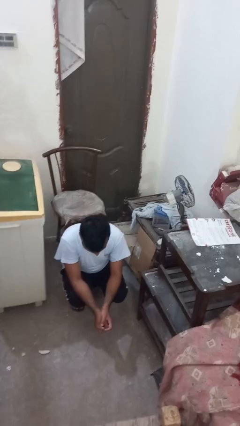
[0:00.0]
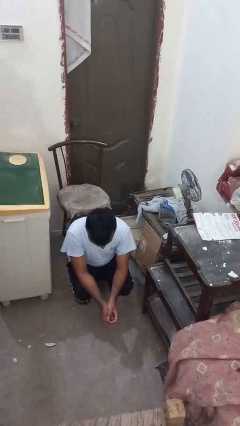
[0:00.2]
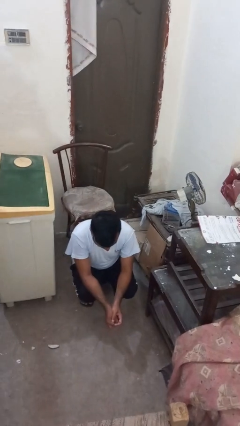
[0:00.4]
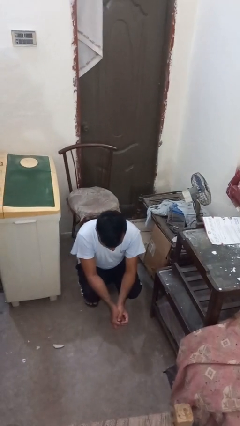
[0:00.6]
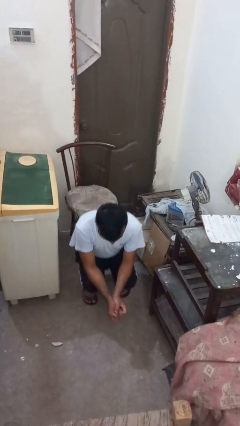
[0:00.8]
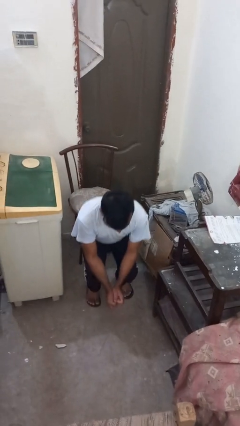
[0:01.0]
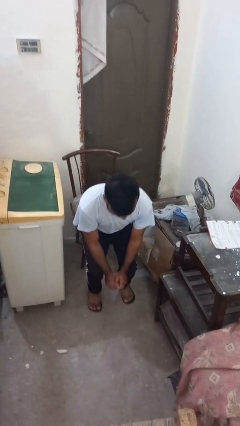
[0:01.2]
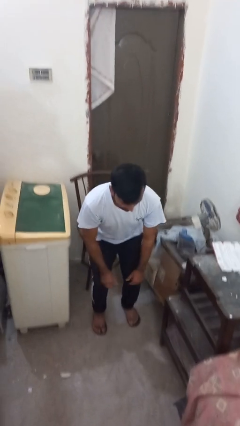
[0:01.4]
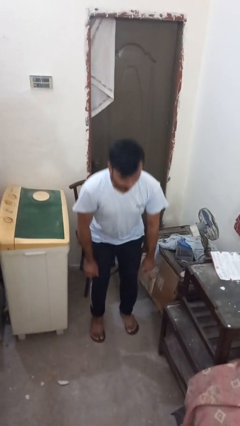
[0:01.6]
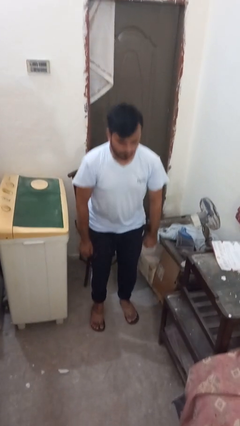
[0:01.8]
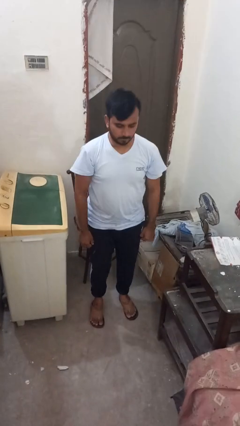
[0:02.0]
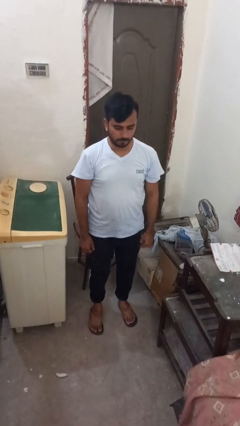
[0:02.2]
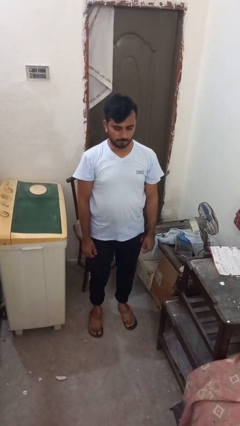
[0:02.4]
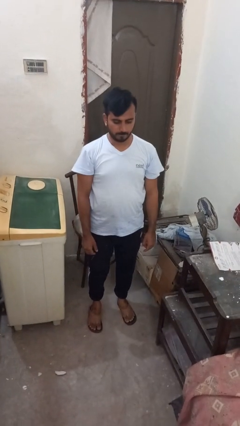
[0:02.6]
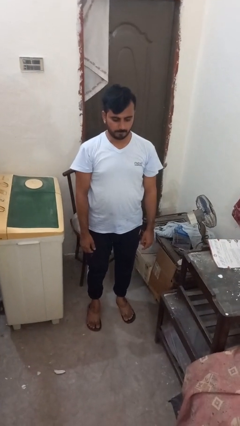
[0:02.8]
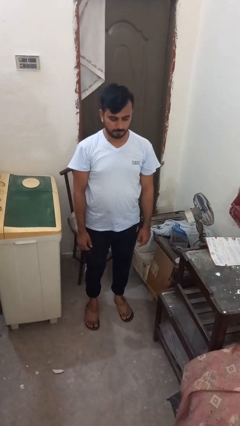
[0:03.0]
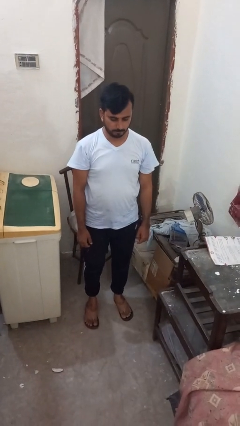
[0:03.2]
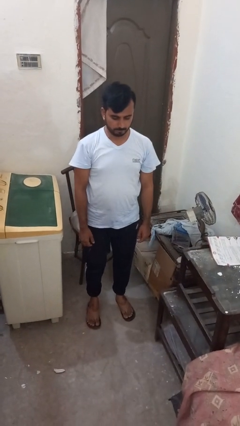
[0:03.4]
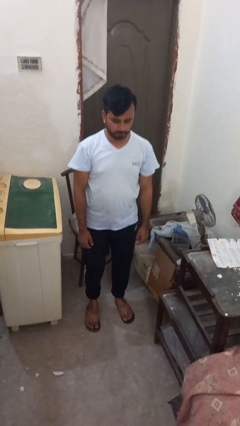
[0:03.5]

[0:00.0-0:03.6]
person stands up from floor

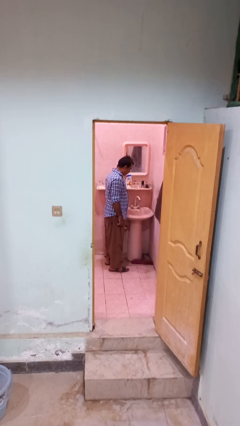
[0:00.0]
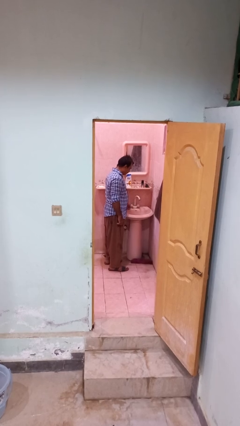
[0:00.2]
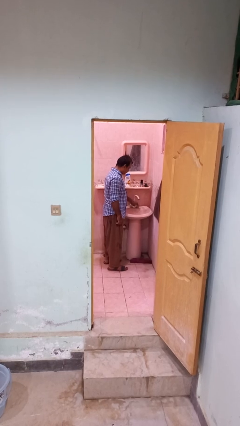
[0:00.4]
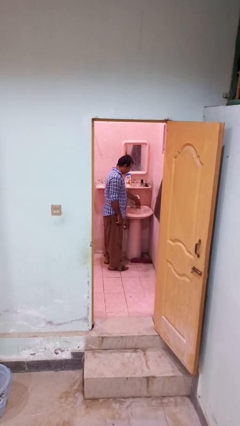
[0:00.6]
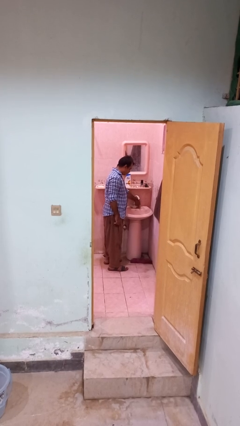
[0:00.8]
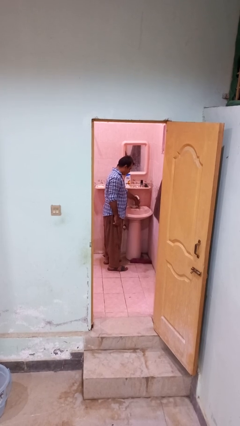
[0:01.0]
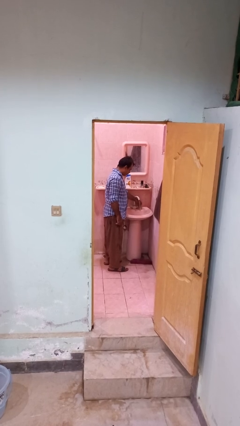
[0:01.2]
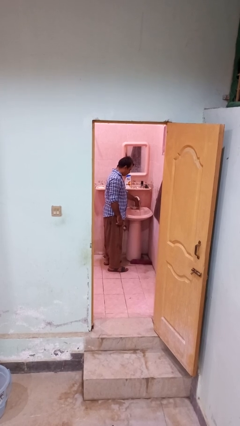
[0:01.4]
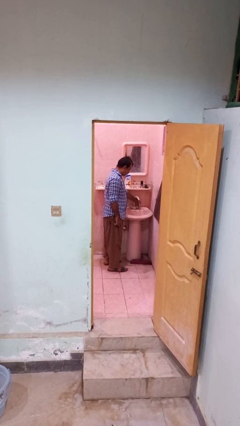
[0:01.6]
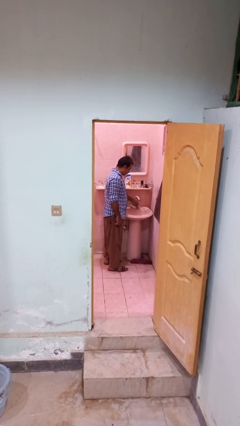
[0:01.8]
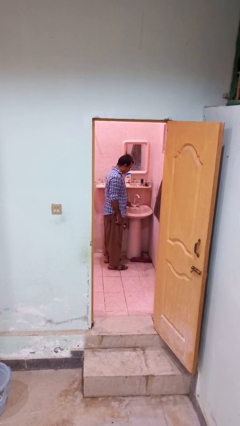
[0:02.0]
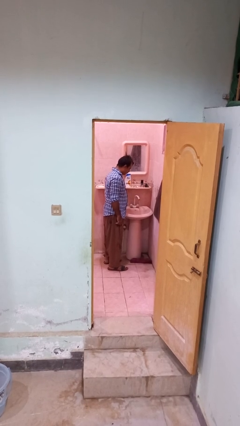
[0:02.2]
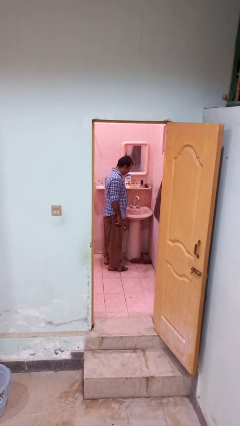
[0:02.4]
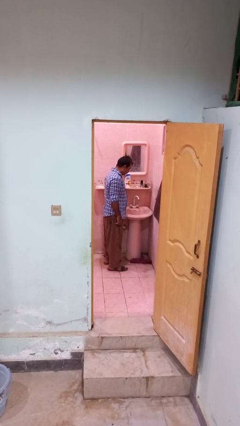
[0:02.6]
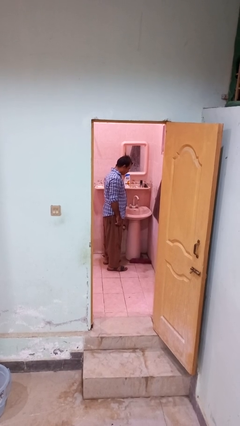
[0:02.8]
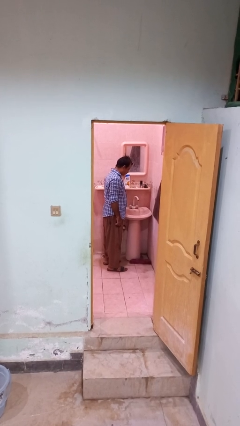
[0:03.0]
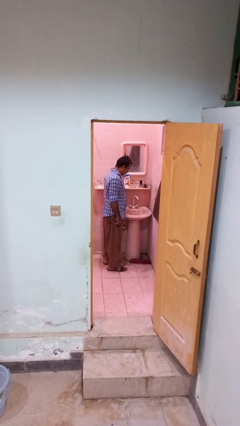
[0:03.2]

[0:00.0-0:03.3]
person opens clothes washer

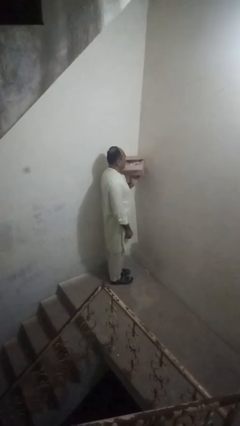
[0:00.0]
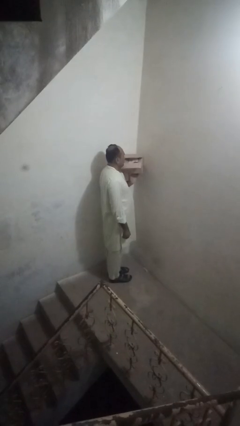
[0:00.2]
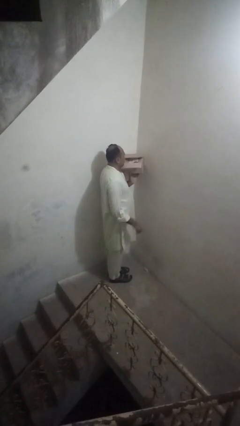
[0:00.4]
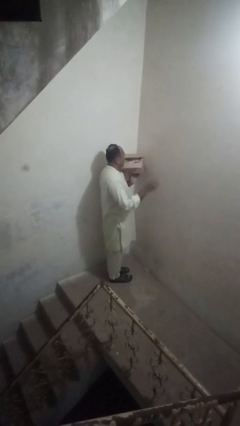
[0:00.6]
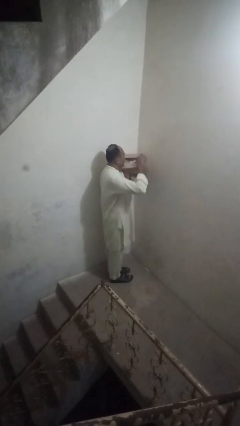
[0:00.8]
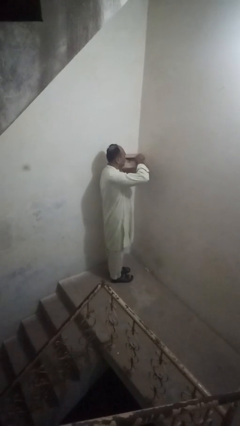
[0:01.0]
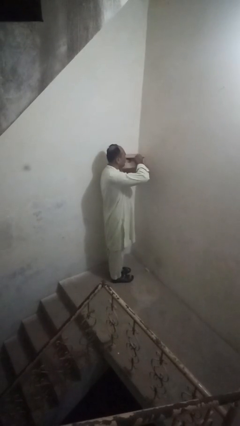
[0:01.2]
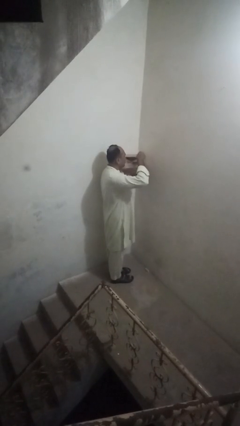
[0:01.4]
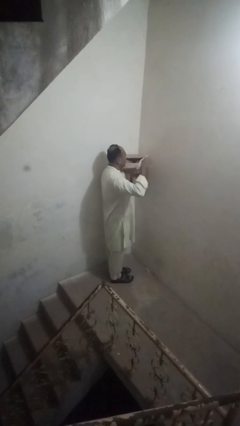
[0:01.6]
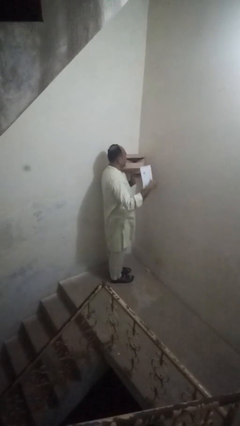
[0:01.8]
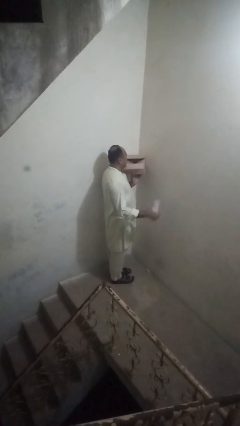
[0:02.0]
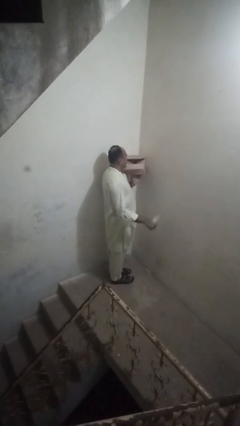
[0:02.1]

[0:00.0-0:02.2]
person takes letters from mailbox

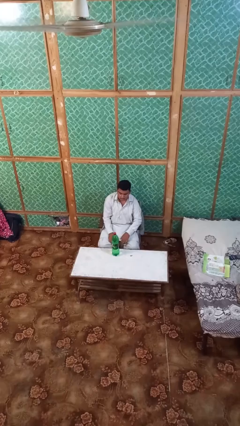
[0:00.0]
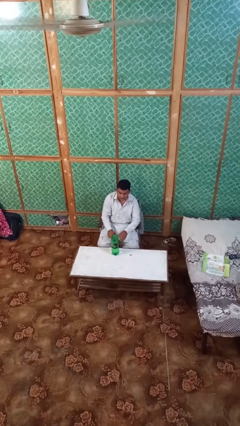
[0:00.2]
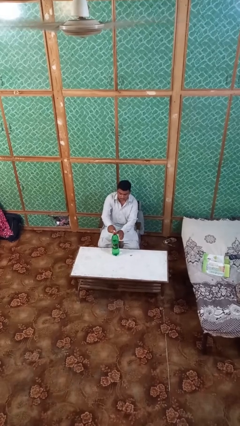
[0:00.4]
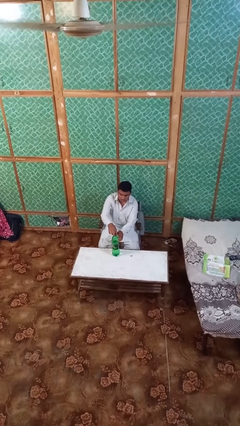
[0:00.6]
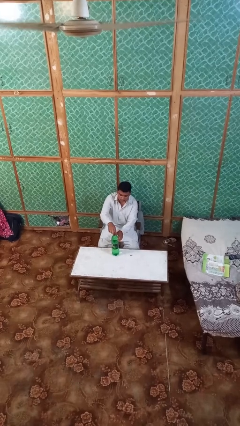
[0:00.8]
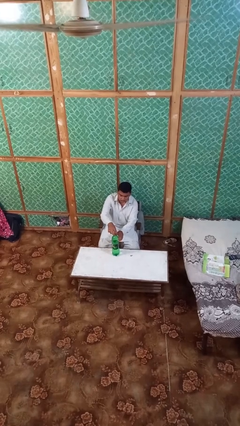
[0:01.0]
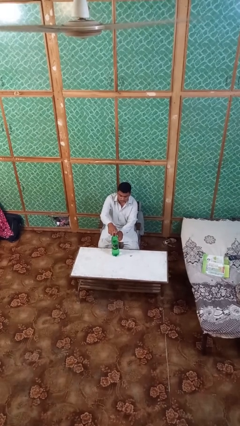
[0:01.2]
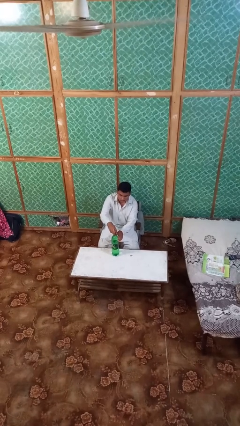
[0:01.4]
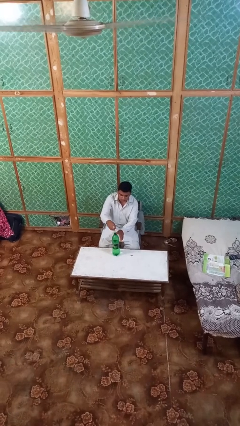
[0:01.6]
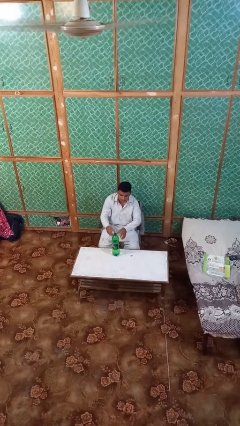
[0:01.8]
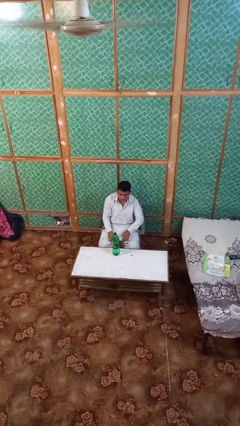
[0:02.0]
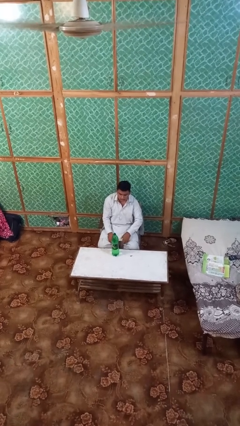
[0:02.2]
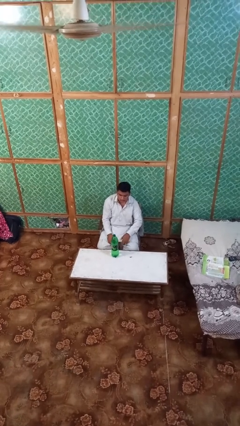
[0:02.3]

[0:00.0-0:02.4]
person unscrews lid from bottle

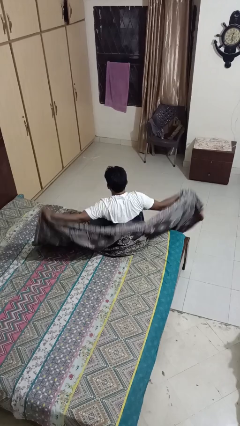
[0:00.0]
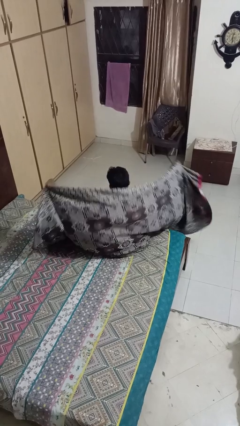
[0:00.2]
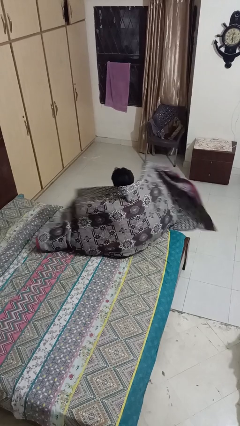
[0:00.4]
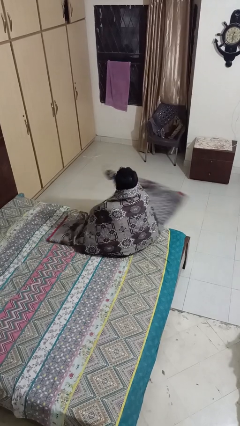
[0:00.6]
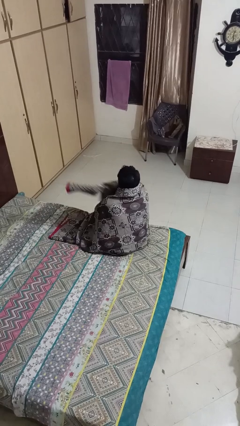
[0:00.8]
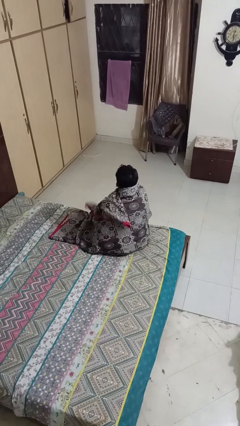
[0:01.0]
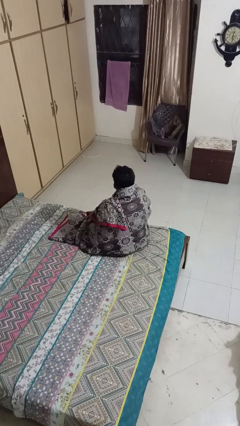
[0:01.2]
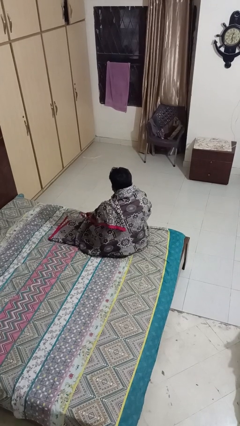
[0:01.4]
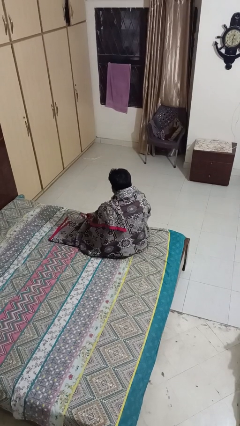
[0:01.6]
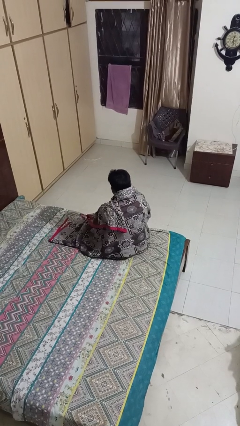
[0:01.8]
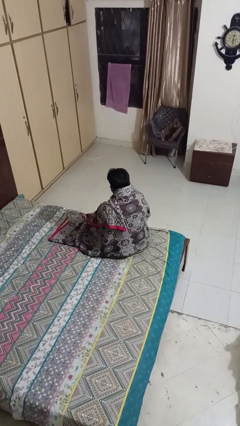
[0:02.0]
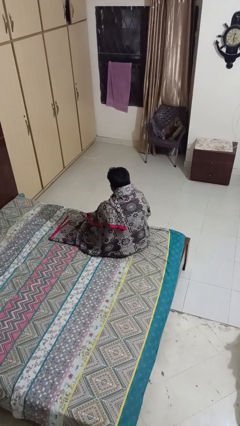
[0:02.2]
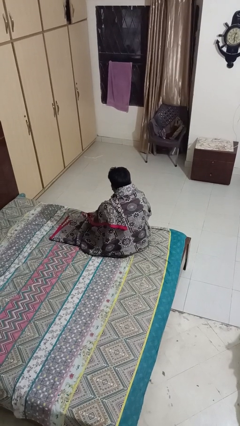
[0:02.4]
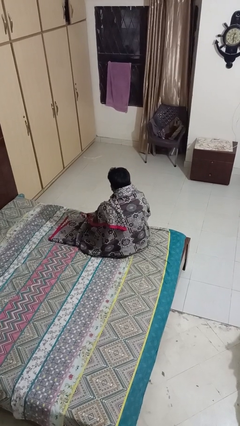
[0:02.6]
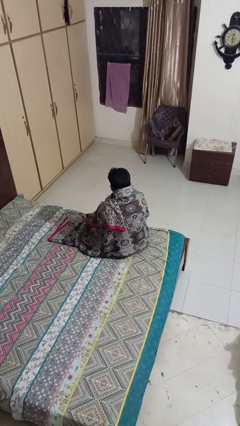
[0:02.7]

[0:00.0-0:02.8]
person covers with blanket

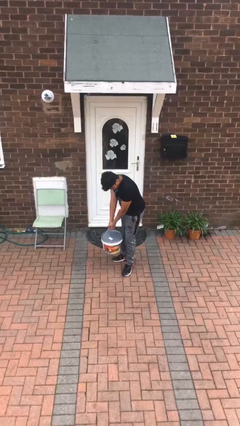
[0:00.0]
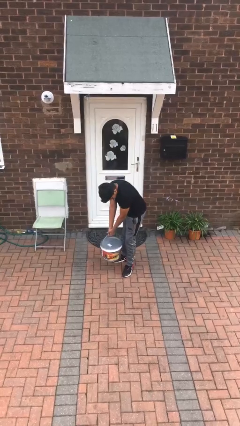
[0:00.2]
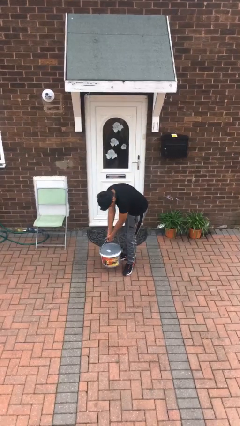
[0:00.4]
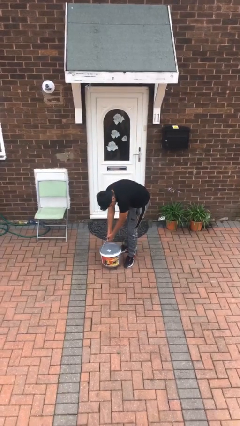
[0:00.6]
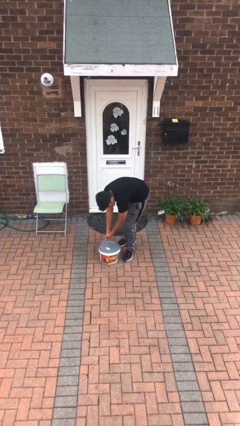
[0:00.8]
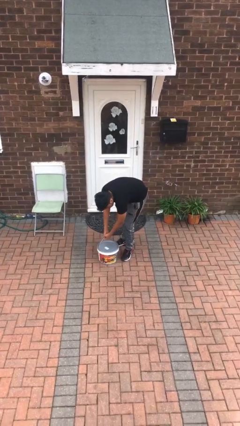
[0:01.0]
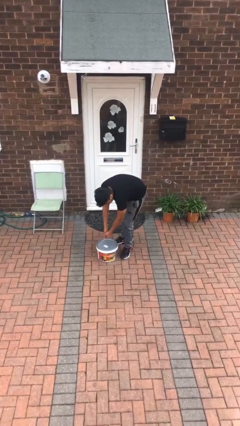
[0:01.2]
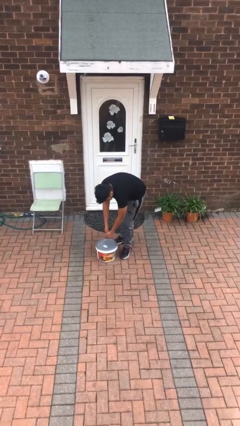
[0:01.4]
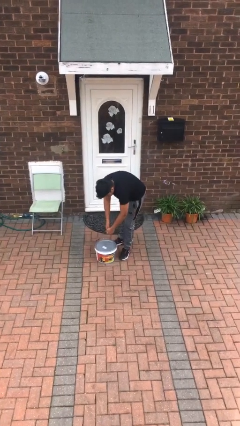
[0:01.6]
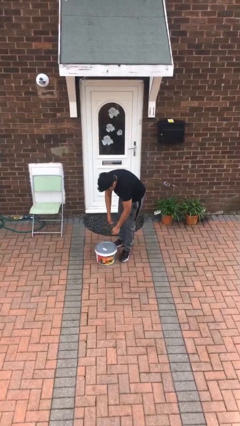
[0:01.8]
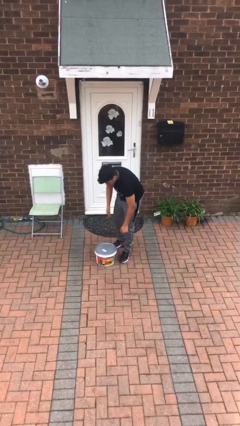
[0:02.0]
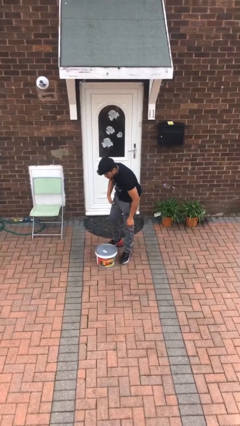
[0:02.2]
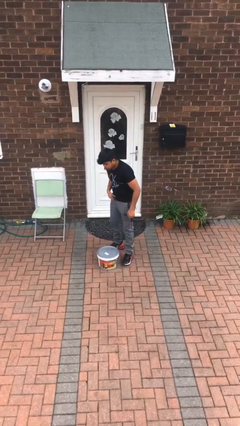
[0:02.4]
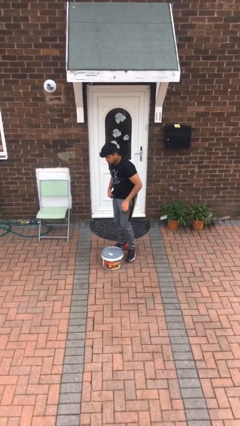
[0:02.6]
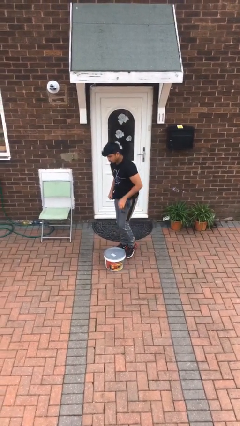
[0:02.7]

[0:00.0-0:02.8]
person puts down object on floor

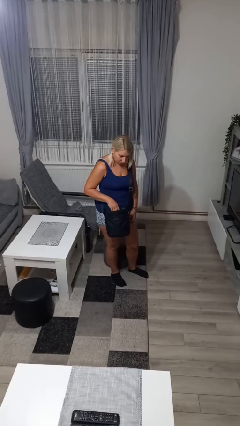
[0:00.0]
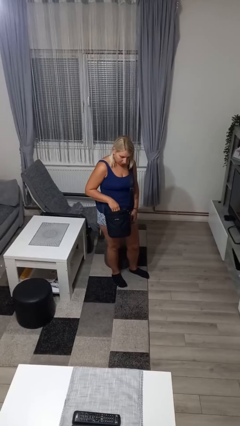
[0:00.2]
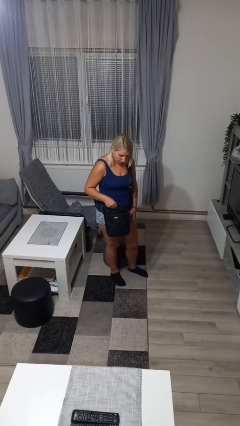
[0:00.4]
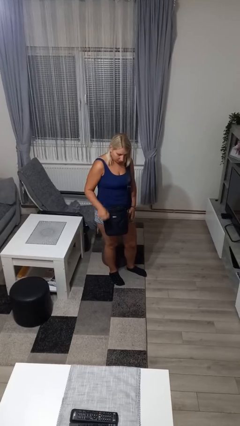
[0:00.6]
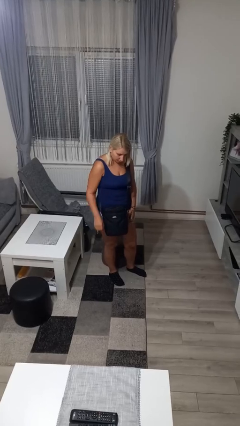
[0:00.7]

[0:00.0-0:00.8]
person puts object into purse
